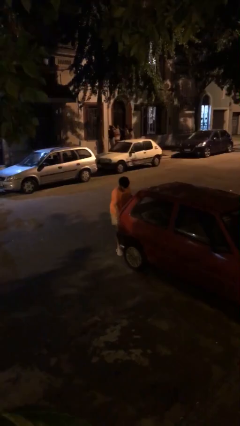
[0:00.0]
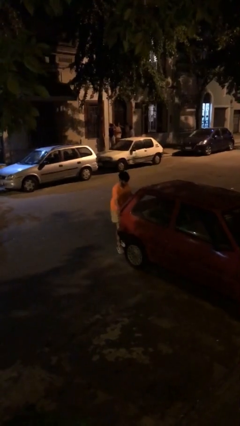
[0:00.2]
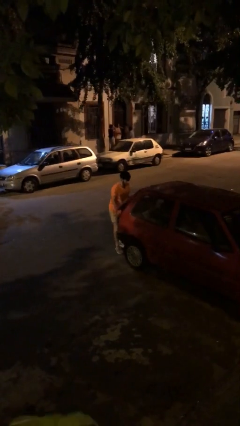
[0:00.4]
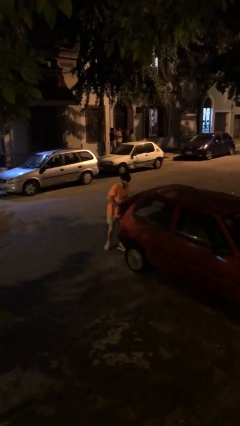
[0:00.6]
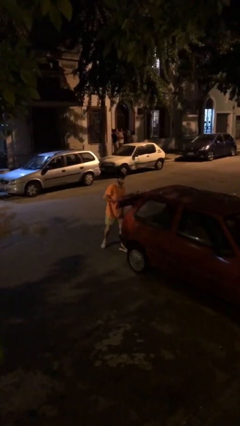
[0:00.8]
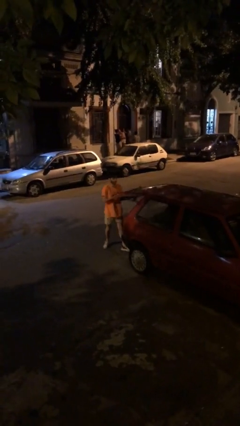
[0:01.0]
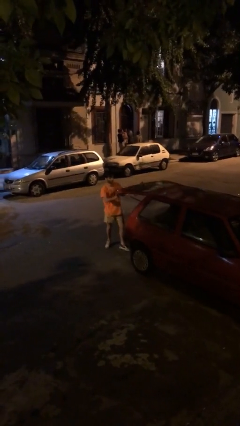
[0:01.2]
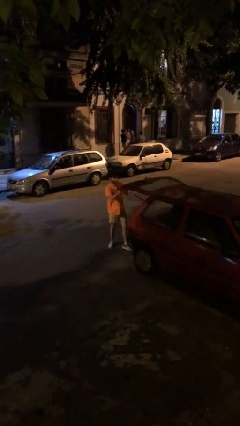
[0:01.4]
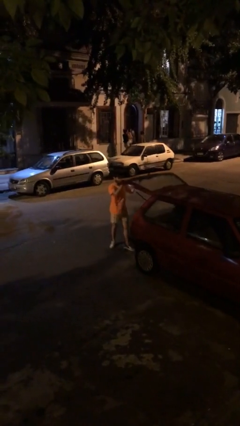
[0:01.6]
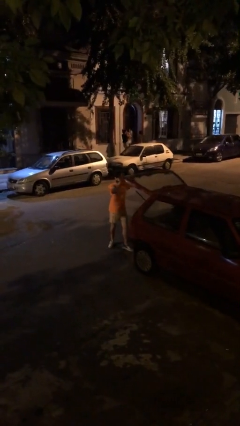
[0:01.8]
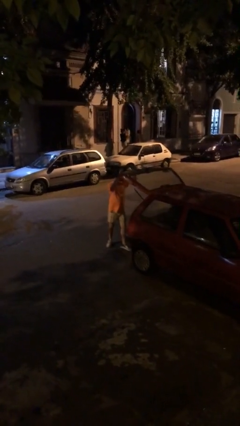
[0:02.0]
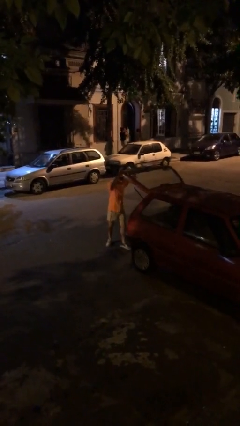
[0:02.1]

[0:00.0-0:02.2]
person opens car trunk

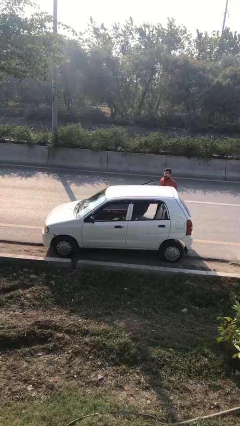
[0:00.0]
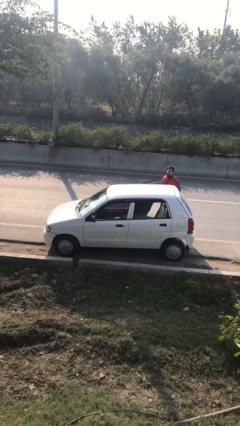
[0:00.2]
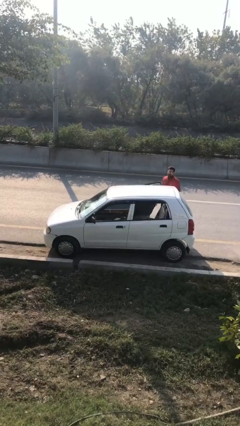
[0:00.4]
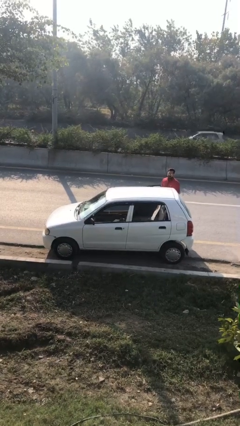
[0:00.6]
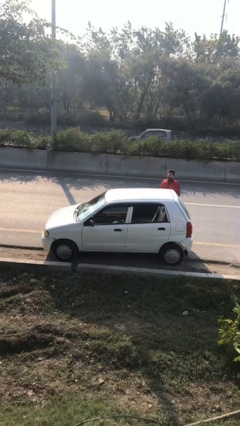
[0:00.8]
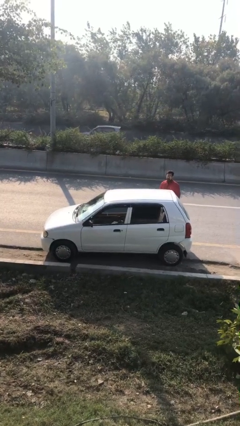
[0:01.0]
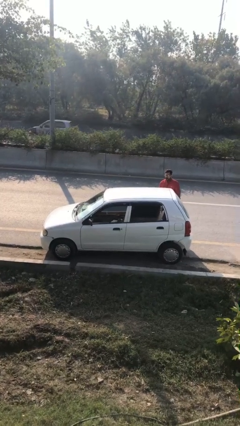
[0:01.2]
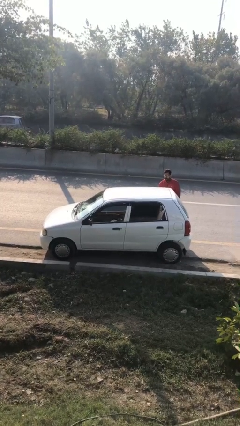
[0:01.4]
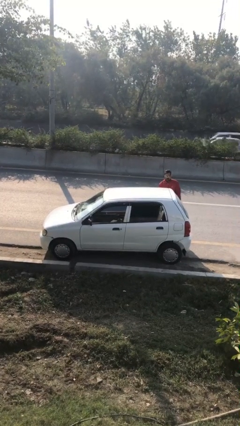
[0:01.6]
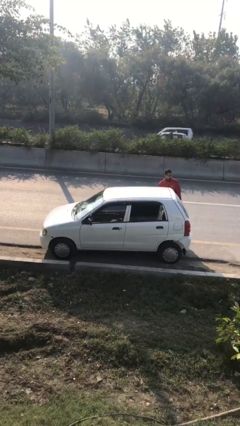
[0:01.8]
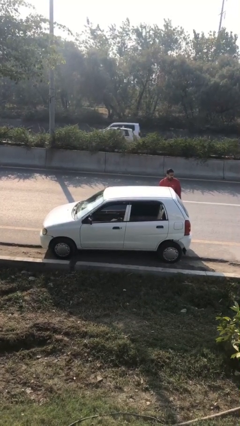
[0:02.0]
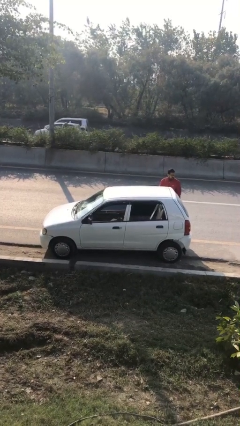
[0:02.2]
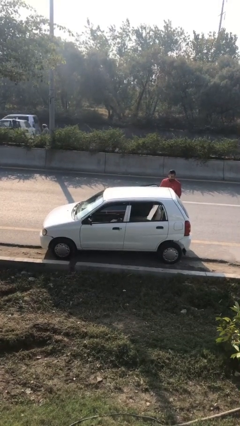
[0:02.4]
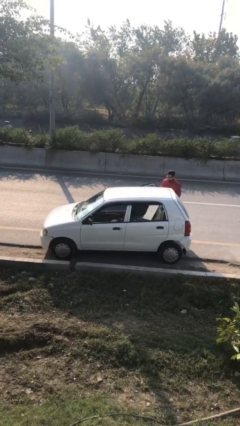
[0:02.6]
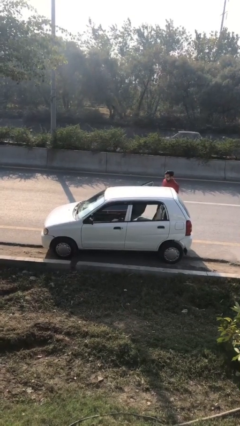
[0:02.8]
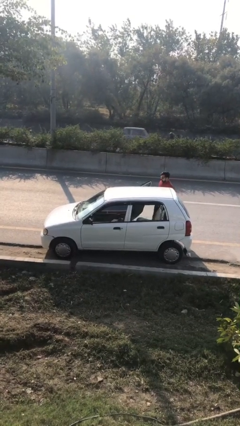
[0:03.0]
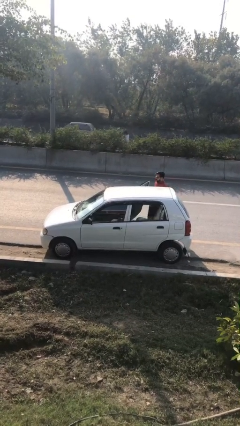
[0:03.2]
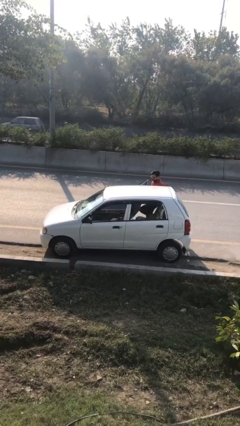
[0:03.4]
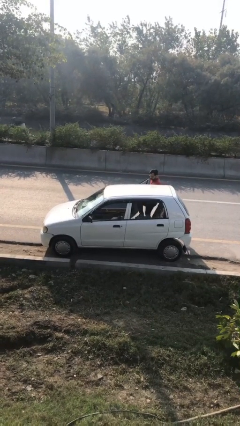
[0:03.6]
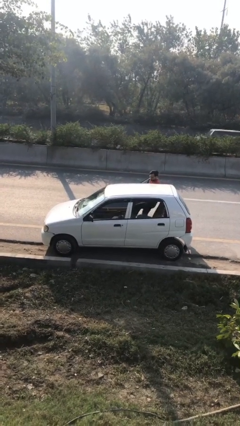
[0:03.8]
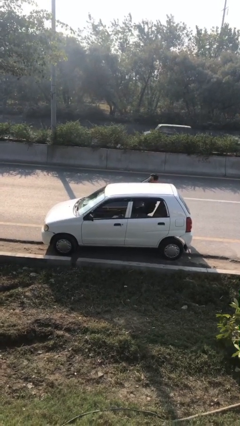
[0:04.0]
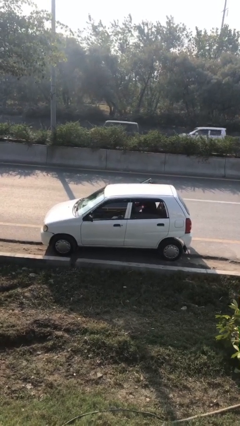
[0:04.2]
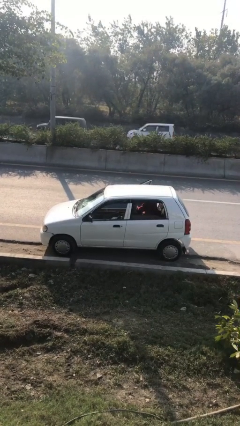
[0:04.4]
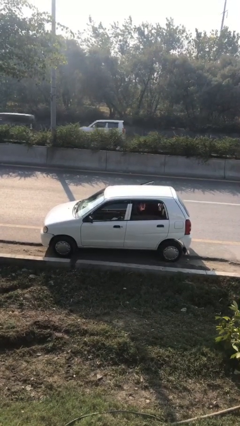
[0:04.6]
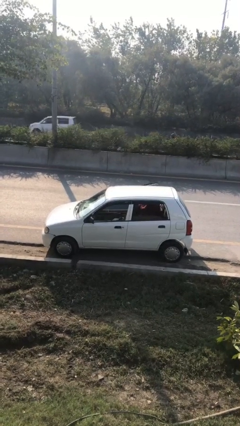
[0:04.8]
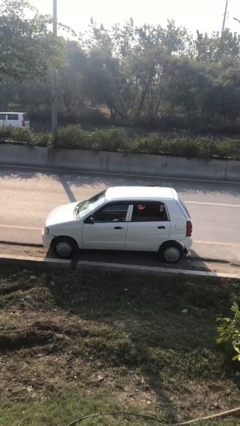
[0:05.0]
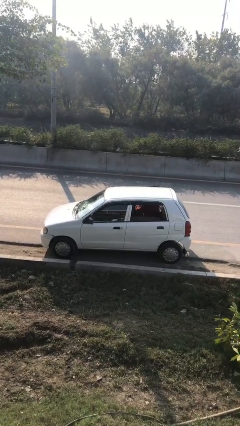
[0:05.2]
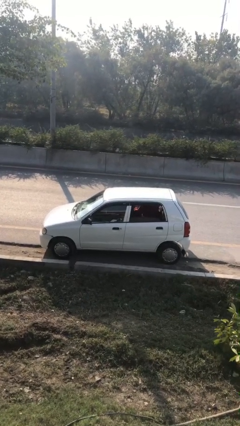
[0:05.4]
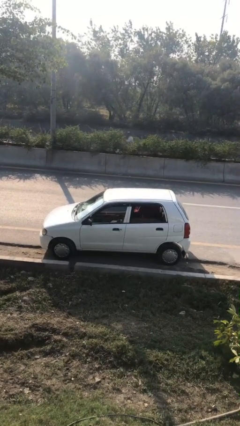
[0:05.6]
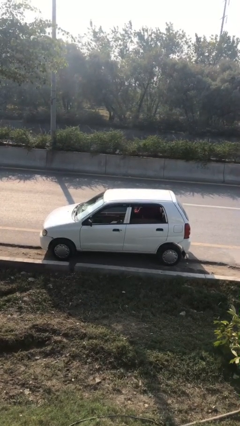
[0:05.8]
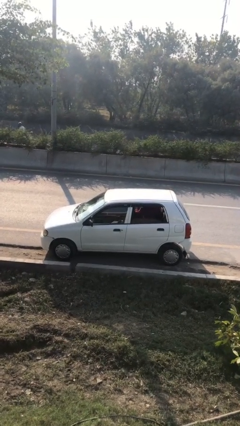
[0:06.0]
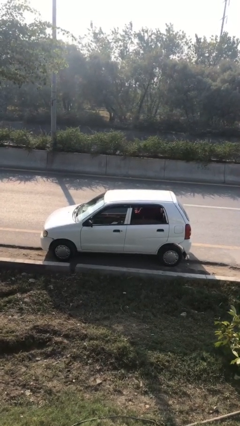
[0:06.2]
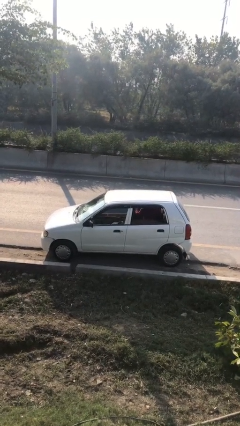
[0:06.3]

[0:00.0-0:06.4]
car picks up person

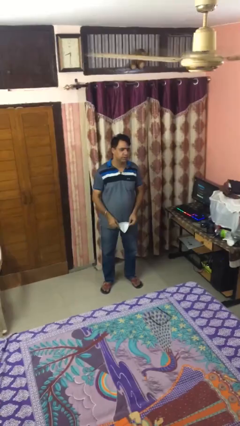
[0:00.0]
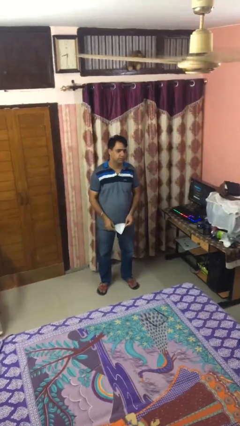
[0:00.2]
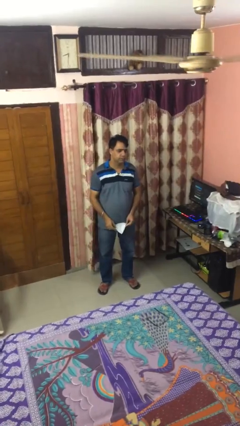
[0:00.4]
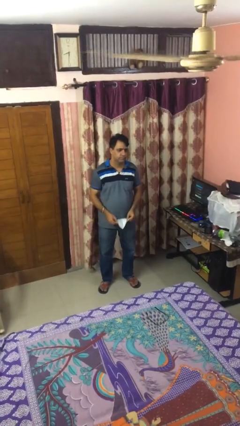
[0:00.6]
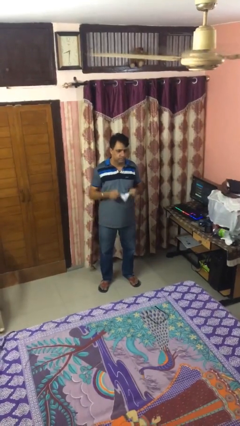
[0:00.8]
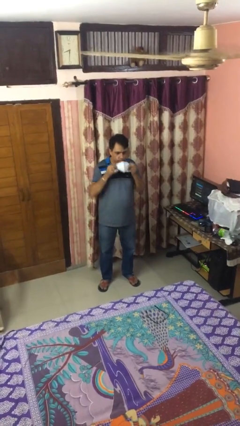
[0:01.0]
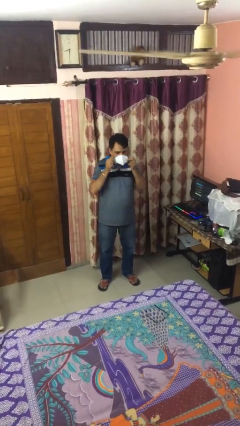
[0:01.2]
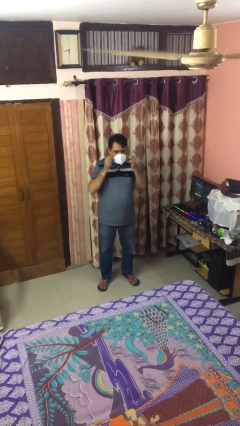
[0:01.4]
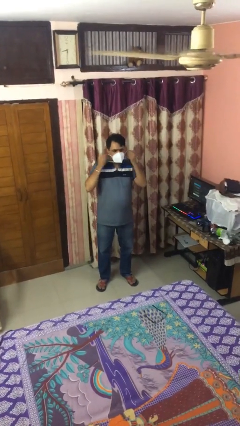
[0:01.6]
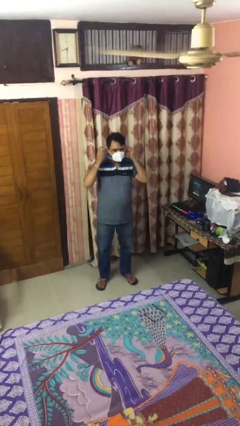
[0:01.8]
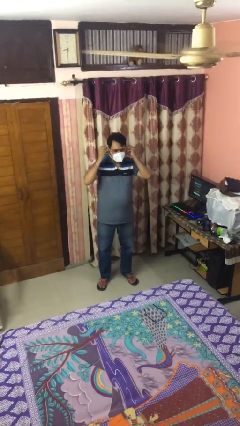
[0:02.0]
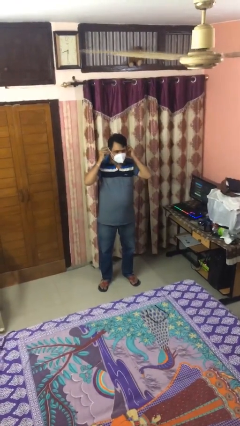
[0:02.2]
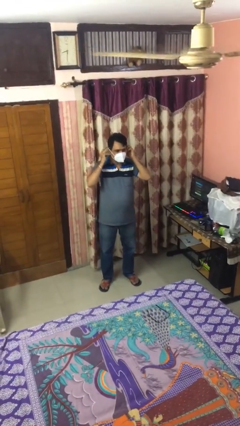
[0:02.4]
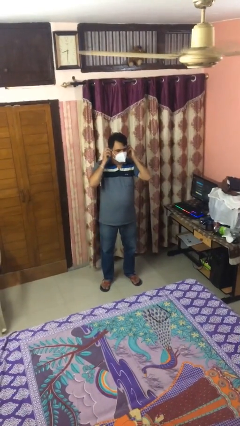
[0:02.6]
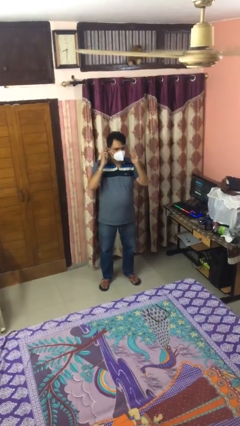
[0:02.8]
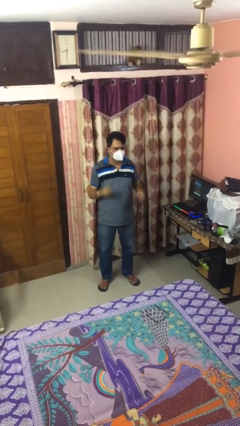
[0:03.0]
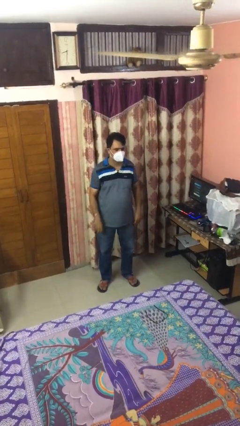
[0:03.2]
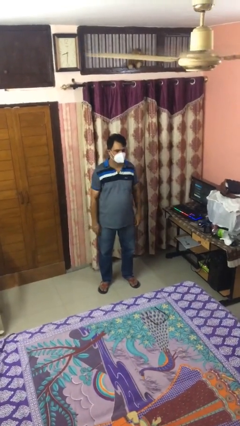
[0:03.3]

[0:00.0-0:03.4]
person puts on facemask

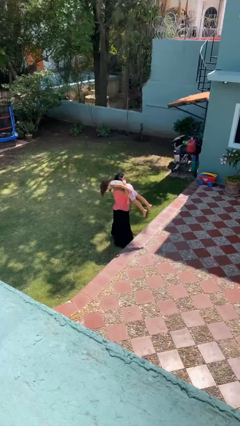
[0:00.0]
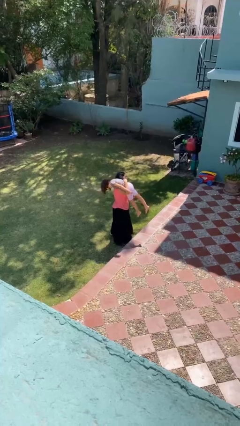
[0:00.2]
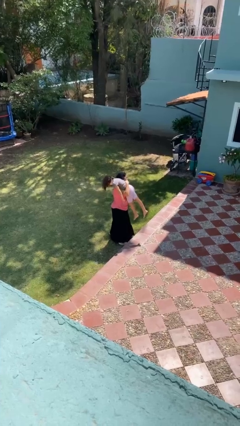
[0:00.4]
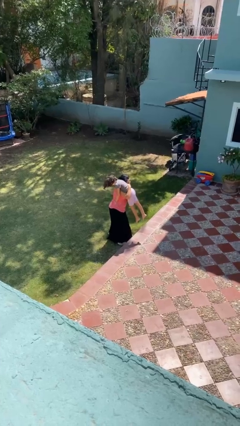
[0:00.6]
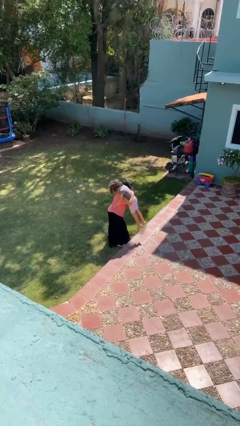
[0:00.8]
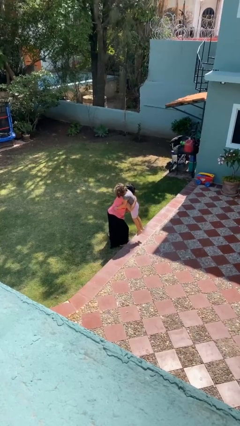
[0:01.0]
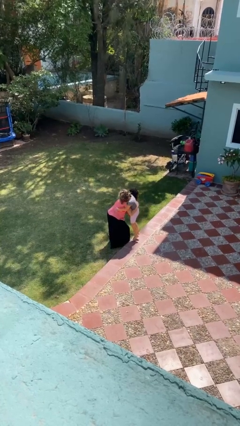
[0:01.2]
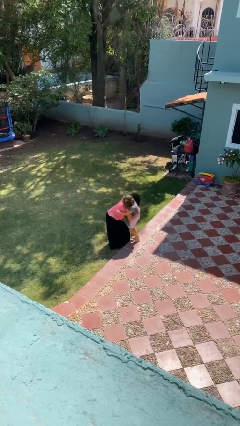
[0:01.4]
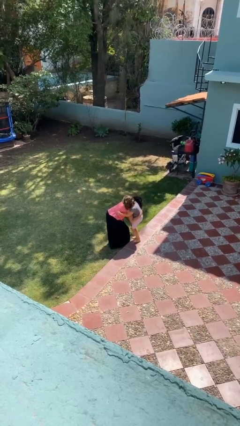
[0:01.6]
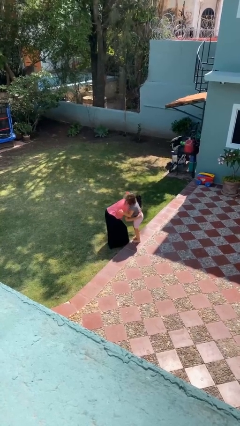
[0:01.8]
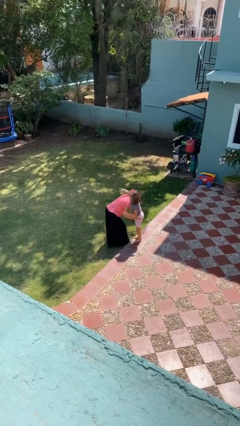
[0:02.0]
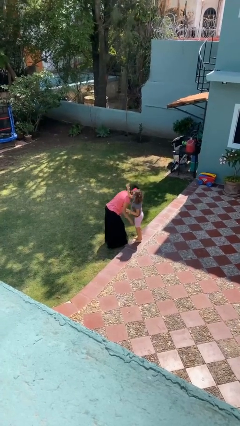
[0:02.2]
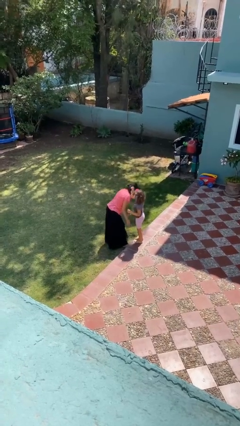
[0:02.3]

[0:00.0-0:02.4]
person puts down person

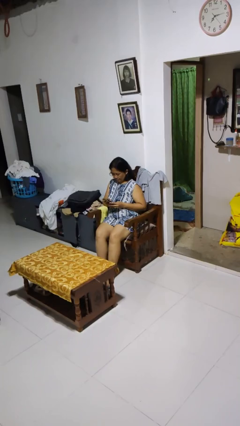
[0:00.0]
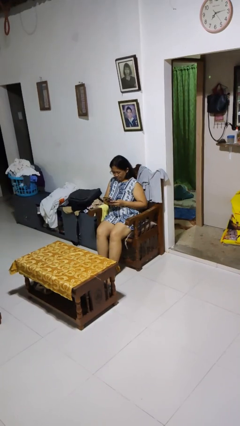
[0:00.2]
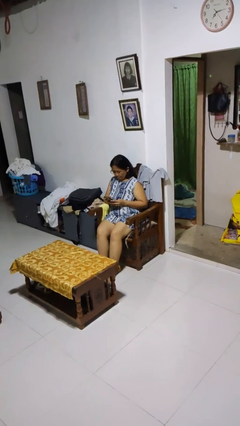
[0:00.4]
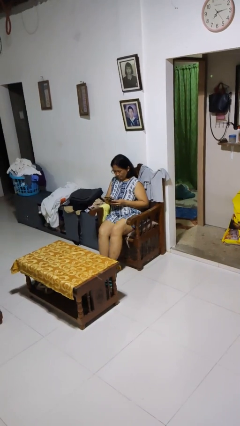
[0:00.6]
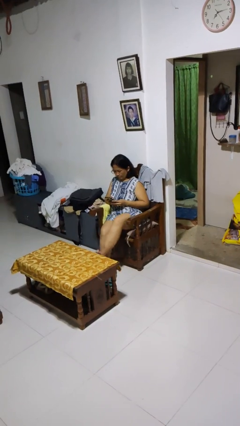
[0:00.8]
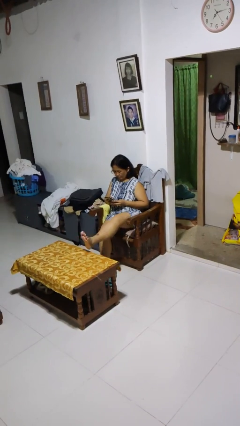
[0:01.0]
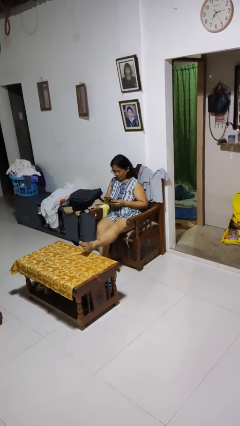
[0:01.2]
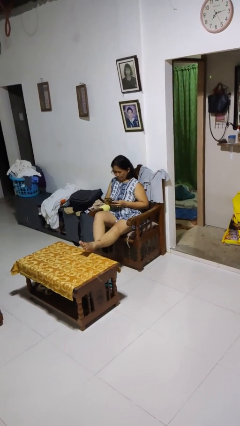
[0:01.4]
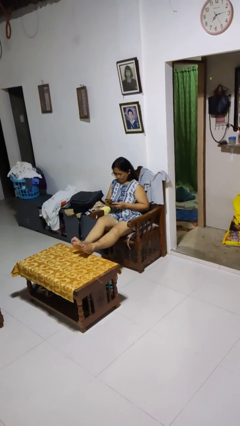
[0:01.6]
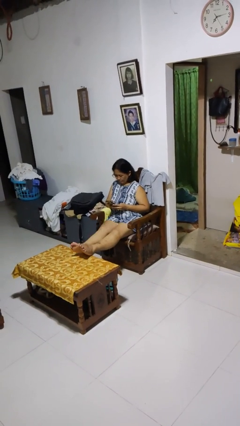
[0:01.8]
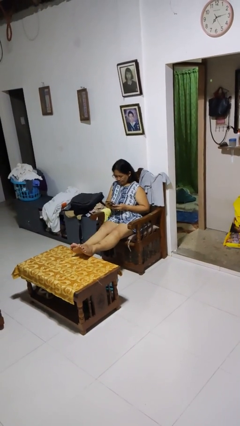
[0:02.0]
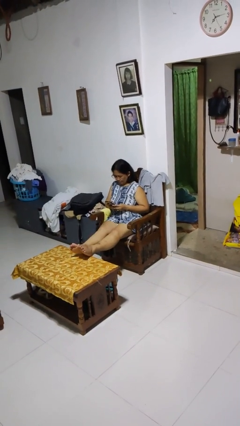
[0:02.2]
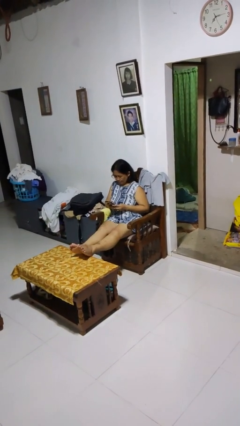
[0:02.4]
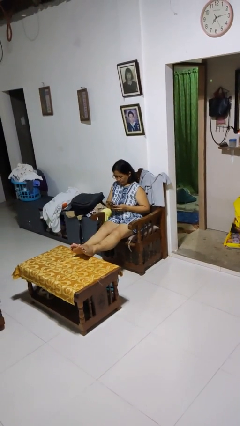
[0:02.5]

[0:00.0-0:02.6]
person puts feet up

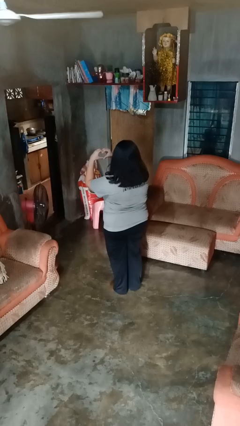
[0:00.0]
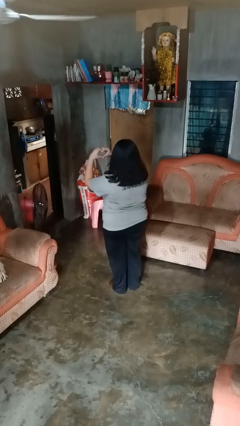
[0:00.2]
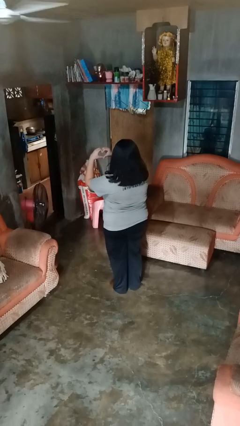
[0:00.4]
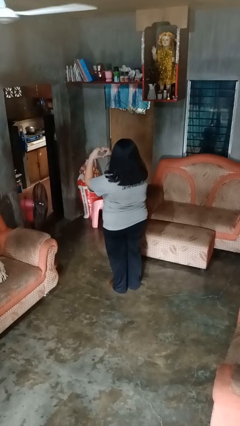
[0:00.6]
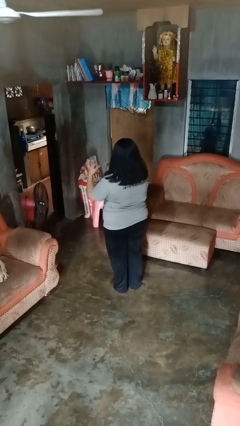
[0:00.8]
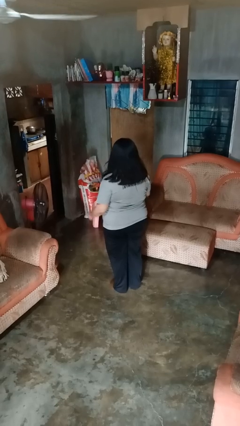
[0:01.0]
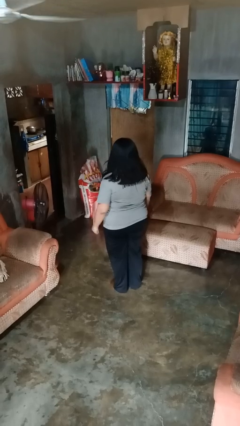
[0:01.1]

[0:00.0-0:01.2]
person gestures heart
